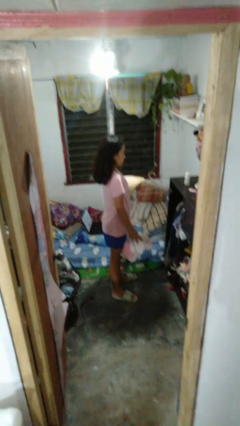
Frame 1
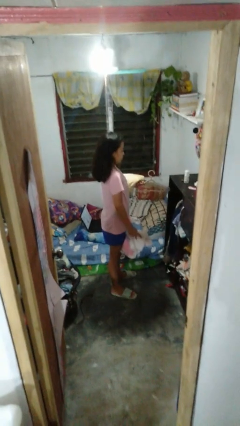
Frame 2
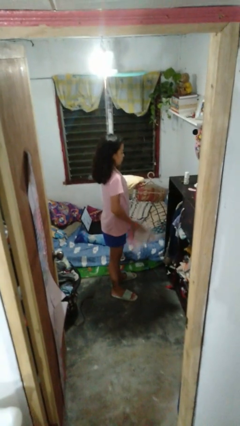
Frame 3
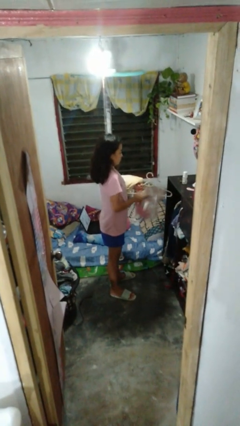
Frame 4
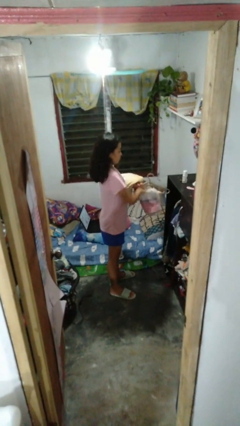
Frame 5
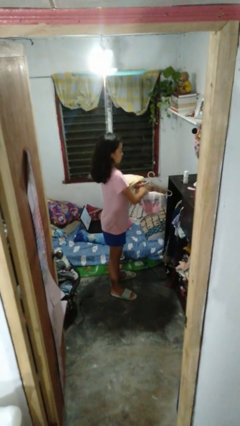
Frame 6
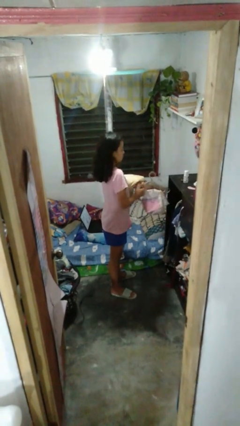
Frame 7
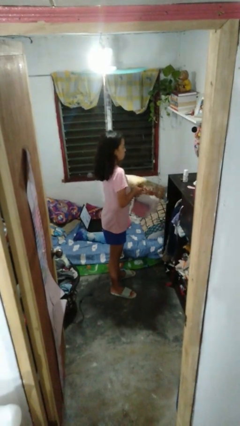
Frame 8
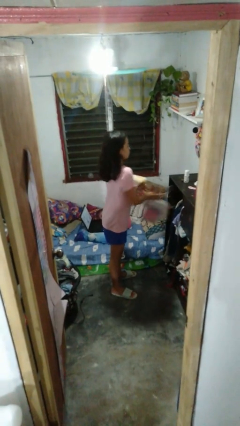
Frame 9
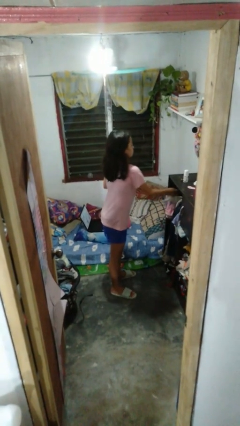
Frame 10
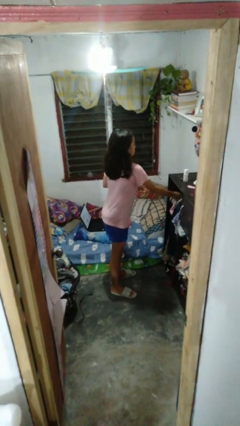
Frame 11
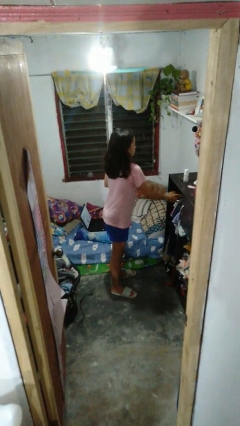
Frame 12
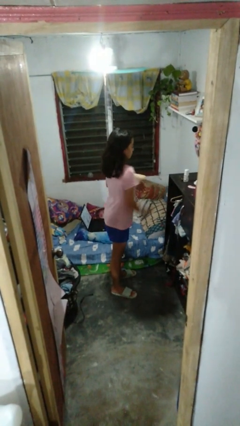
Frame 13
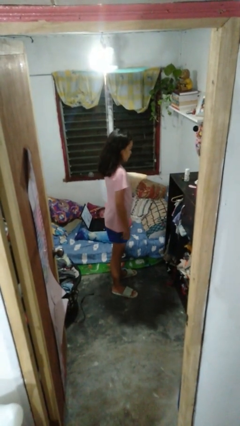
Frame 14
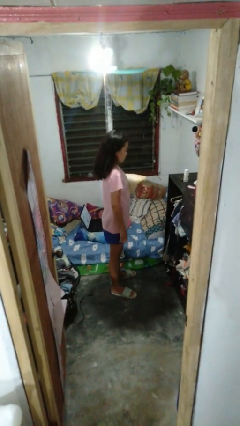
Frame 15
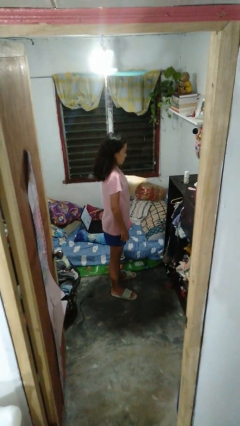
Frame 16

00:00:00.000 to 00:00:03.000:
person puts clothes into closet

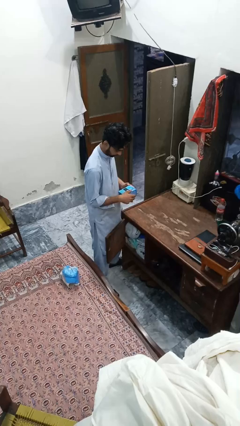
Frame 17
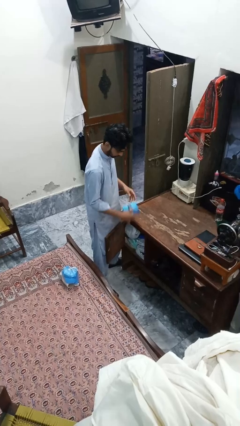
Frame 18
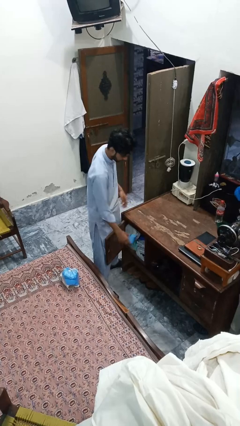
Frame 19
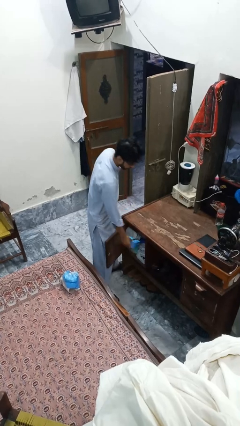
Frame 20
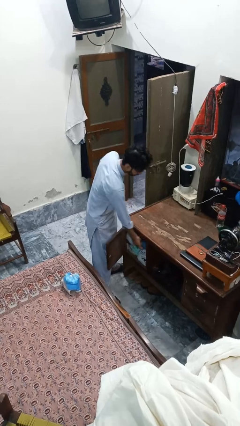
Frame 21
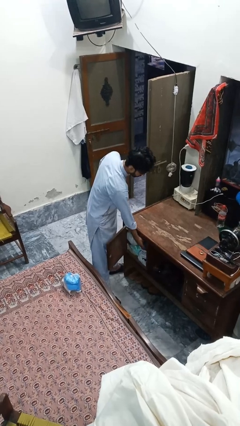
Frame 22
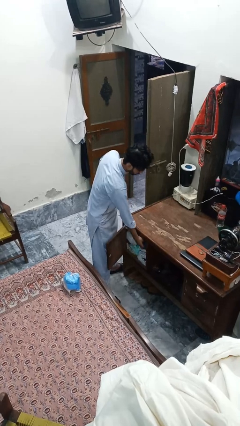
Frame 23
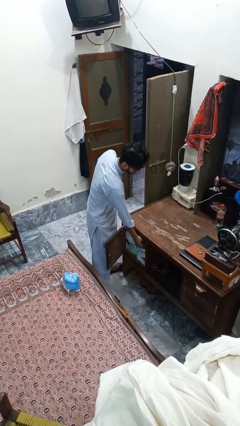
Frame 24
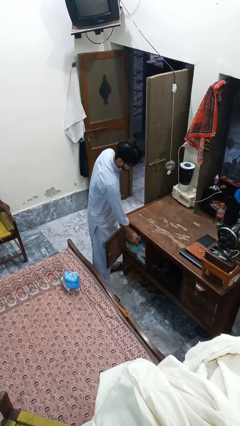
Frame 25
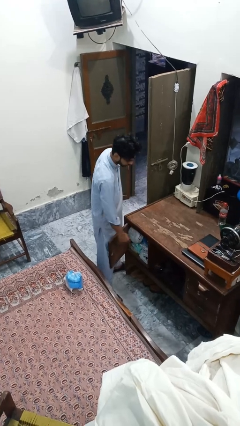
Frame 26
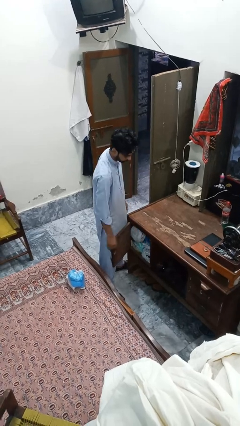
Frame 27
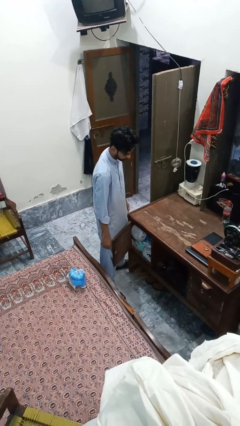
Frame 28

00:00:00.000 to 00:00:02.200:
person puts down object into cabinet

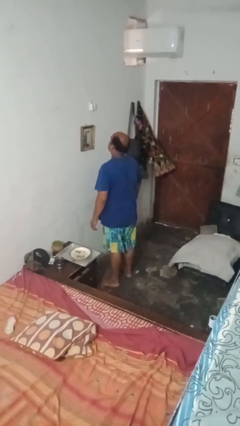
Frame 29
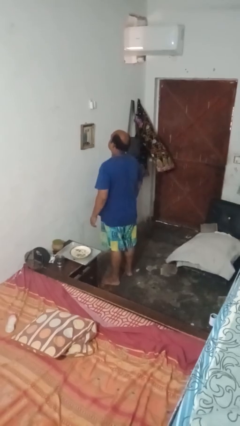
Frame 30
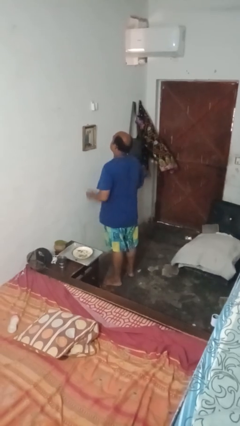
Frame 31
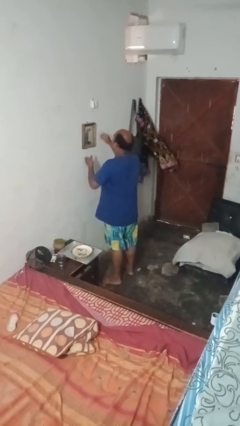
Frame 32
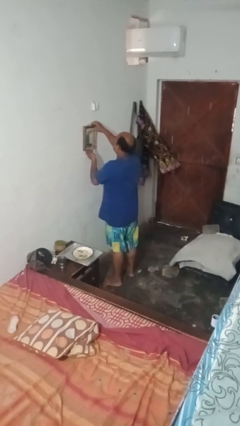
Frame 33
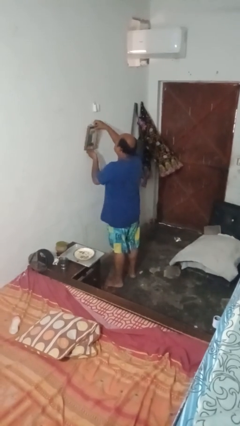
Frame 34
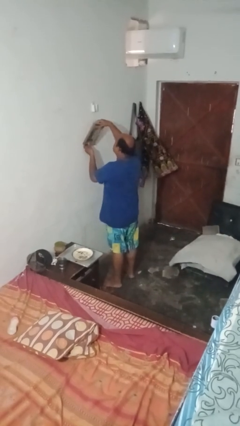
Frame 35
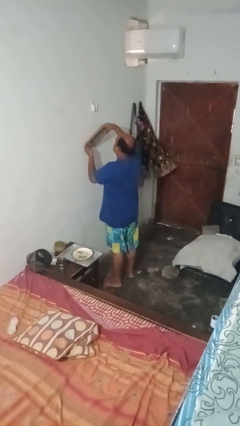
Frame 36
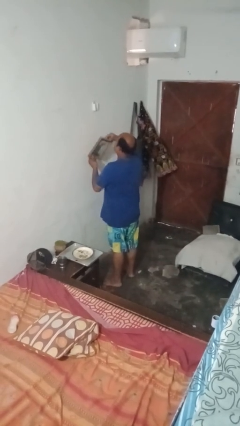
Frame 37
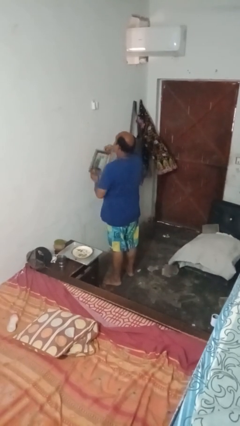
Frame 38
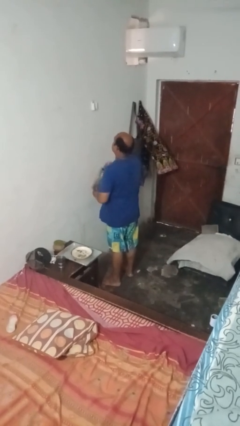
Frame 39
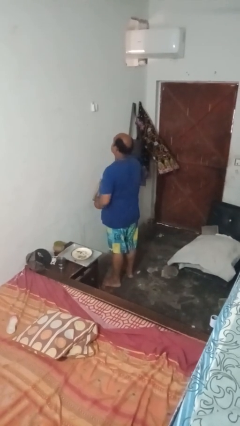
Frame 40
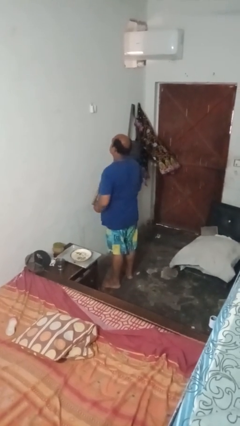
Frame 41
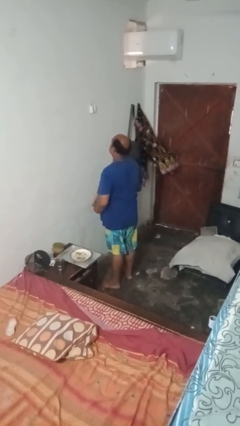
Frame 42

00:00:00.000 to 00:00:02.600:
person takes down picture frame

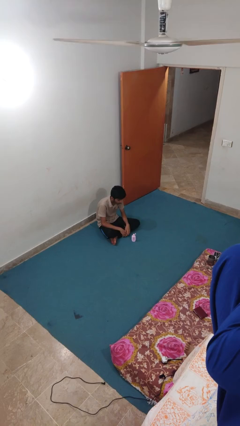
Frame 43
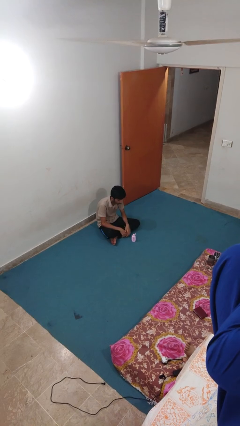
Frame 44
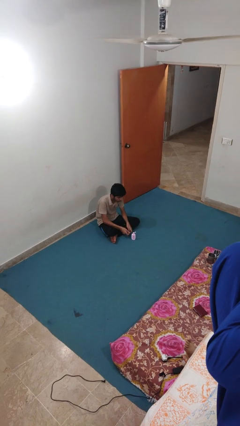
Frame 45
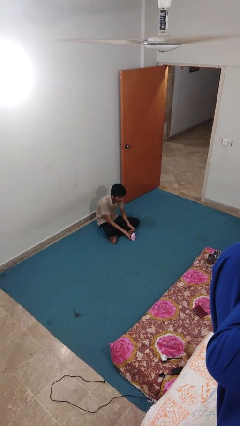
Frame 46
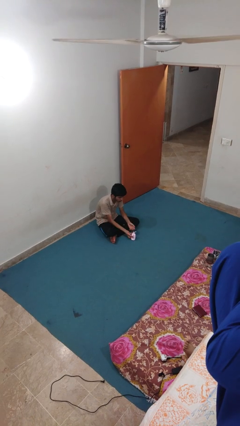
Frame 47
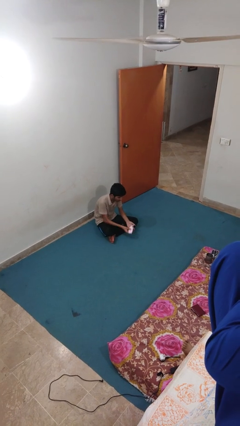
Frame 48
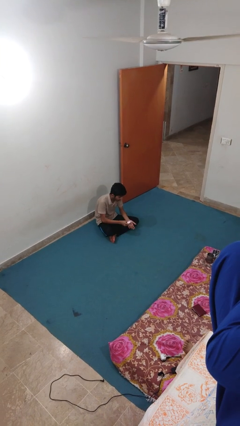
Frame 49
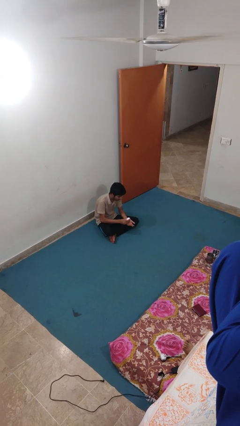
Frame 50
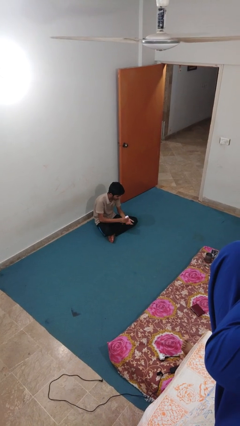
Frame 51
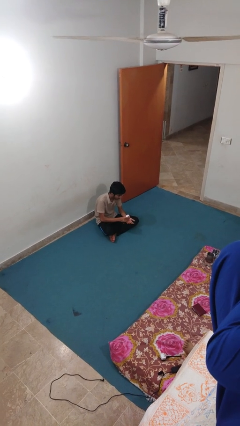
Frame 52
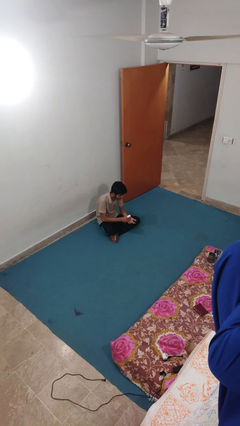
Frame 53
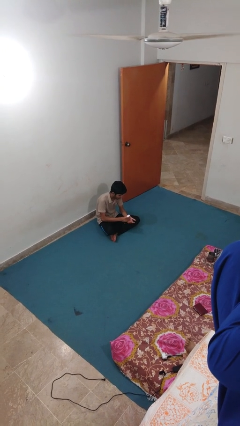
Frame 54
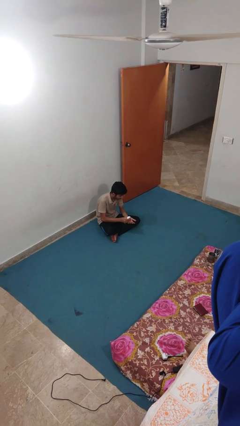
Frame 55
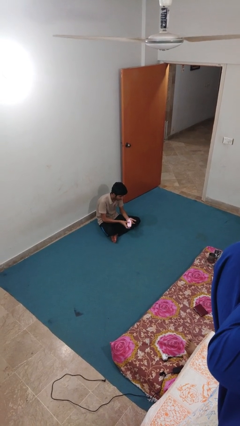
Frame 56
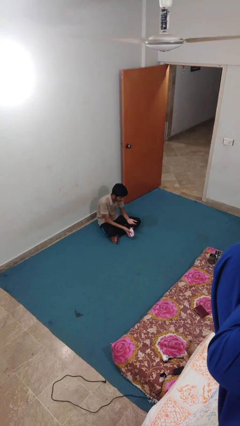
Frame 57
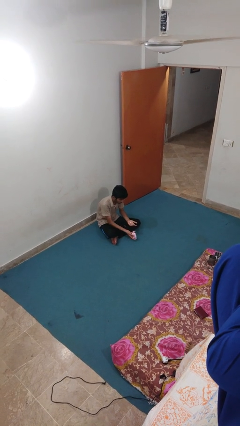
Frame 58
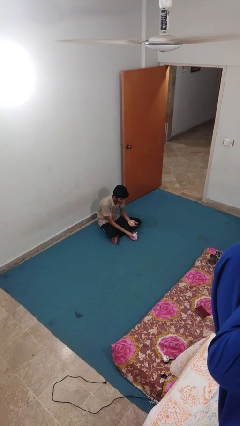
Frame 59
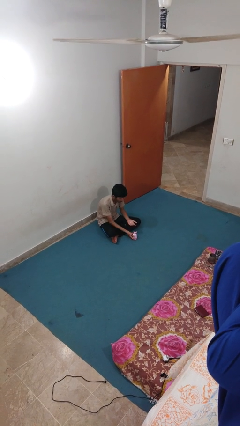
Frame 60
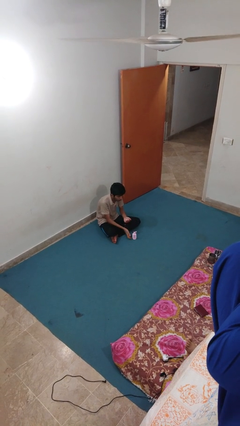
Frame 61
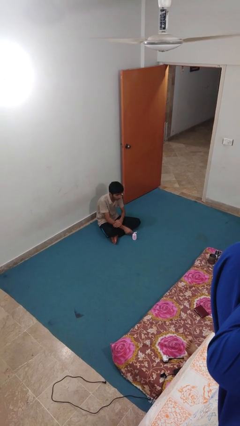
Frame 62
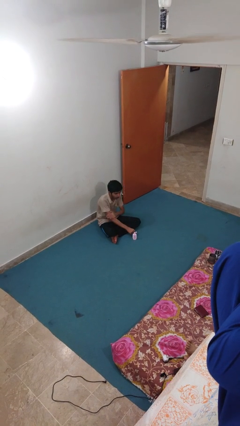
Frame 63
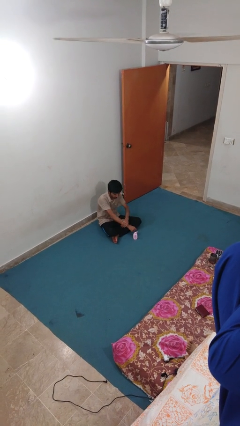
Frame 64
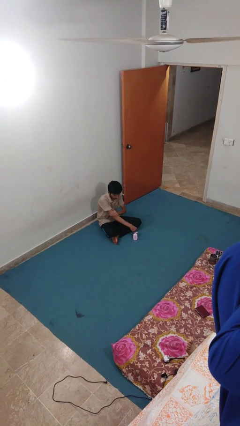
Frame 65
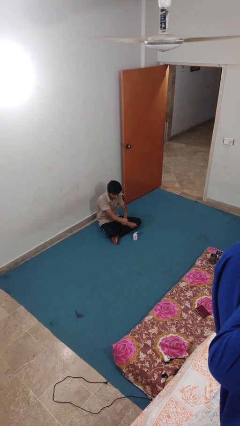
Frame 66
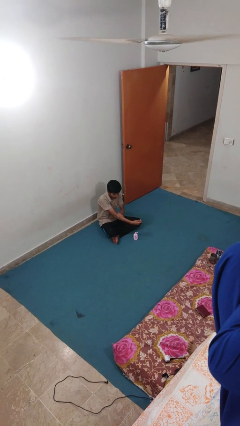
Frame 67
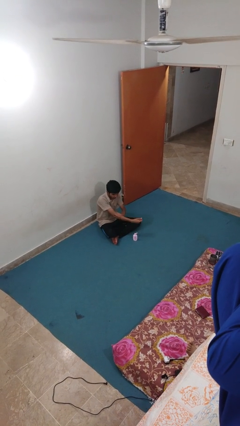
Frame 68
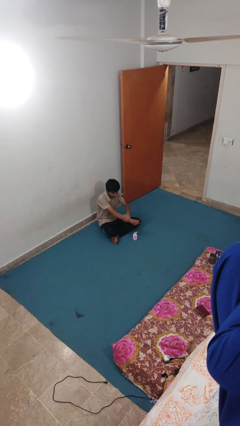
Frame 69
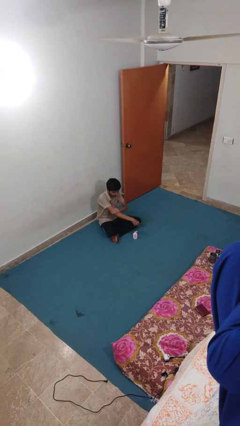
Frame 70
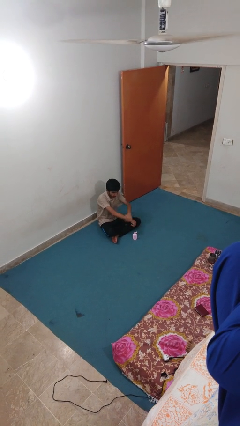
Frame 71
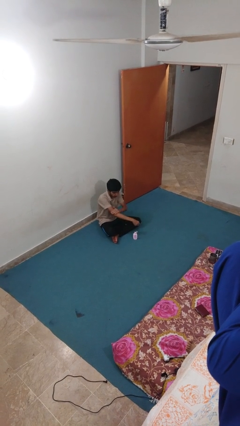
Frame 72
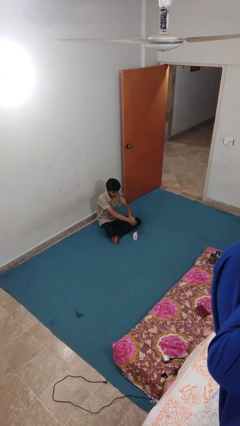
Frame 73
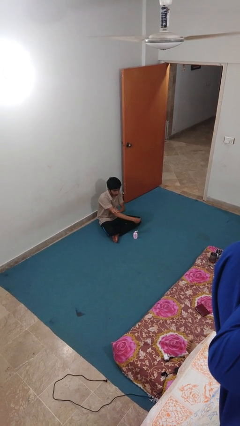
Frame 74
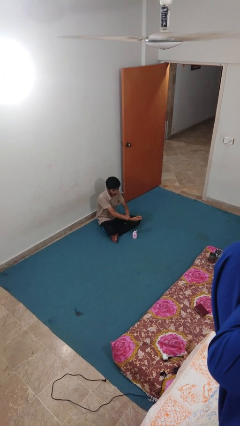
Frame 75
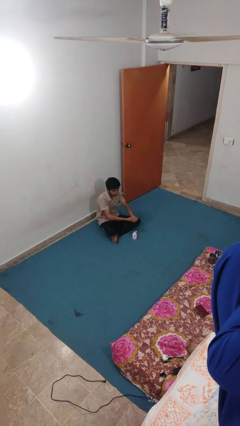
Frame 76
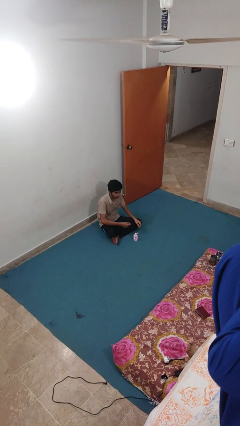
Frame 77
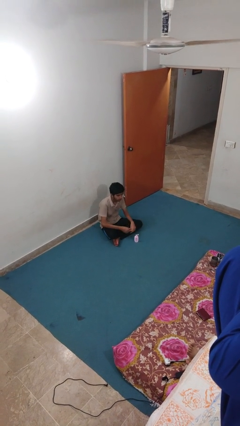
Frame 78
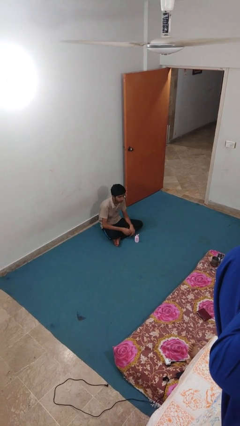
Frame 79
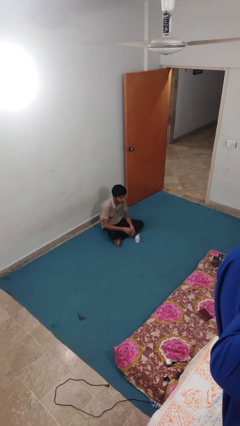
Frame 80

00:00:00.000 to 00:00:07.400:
person applies sunscreen

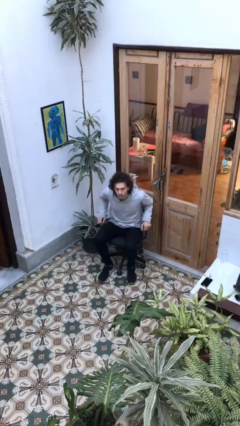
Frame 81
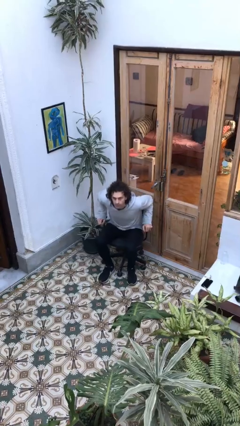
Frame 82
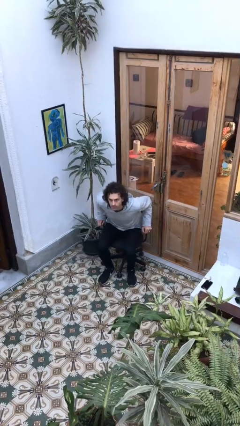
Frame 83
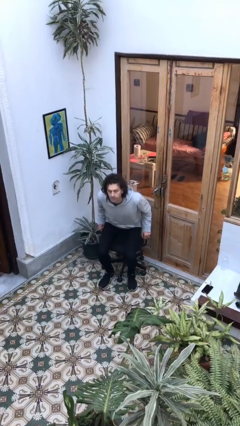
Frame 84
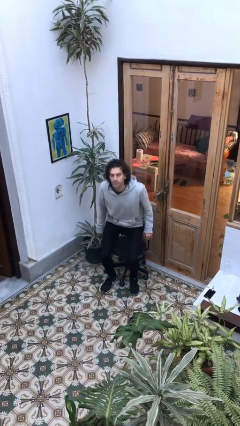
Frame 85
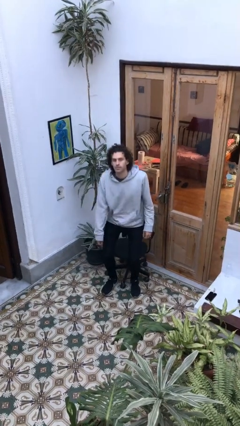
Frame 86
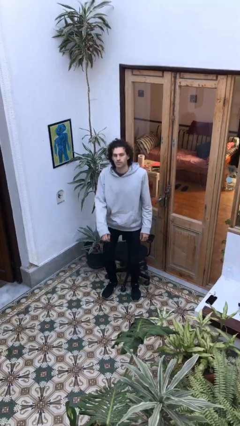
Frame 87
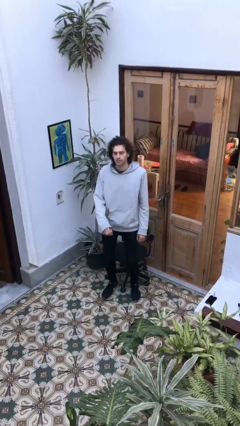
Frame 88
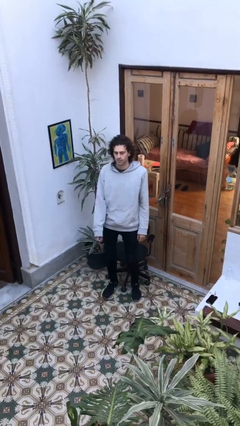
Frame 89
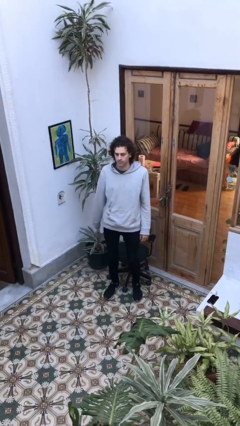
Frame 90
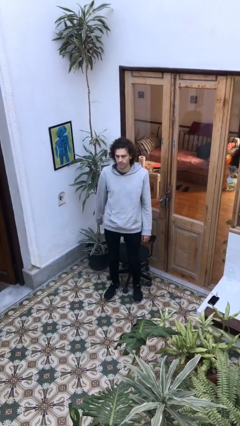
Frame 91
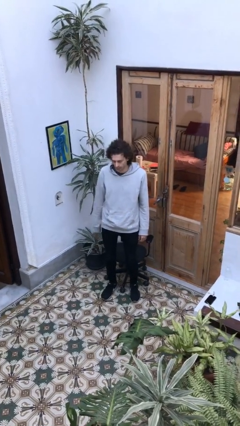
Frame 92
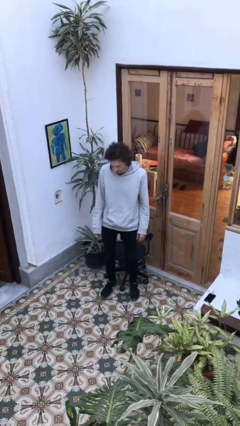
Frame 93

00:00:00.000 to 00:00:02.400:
person stands up

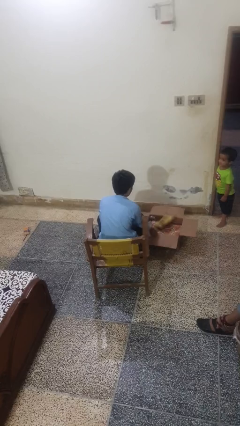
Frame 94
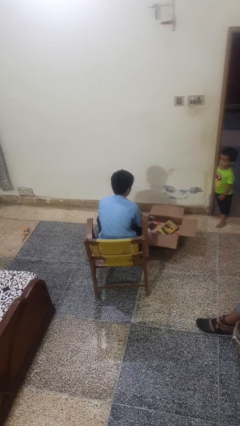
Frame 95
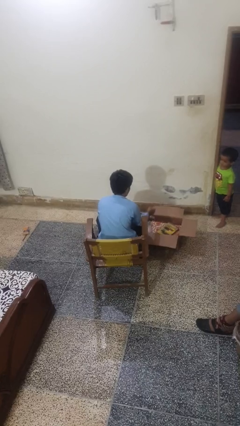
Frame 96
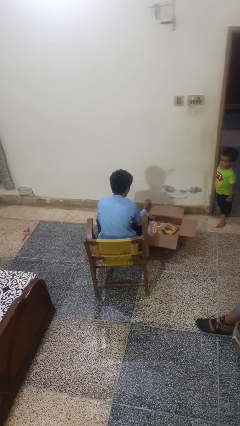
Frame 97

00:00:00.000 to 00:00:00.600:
person puts object into box
